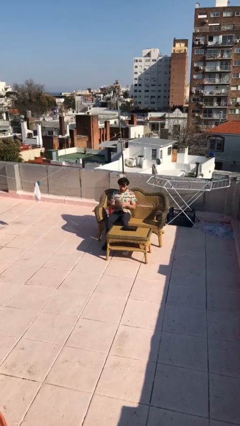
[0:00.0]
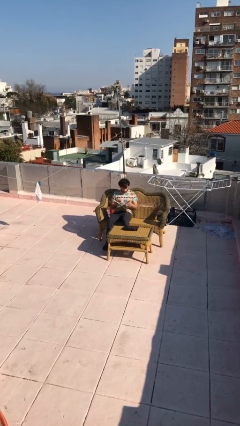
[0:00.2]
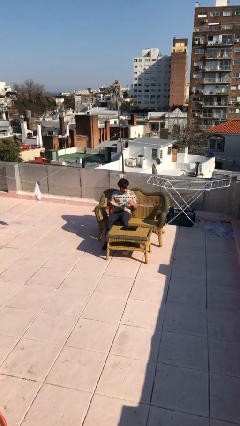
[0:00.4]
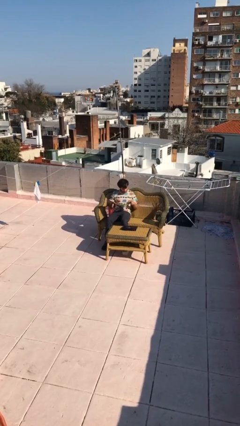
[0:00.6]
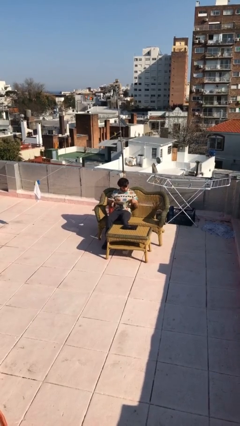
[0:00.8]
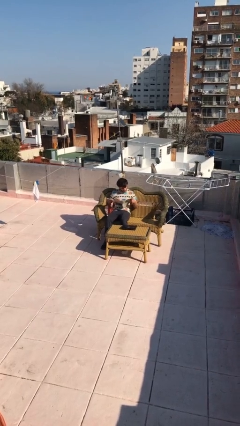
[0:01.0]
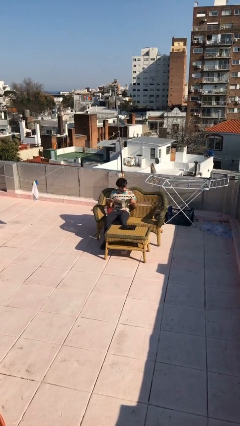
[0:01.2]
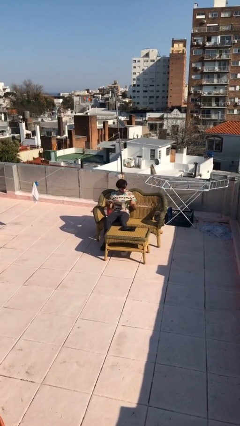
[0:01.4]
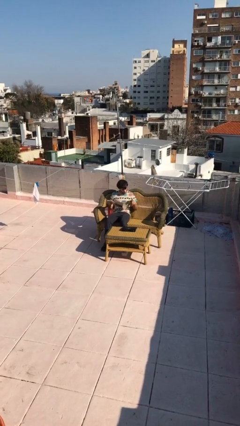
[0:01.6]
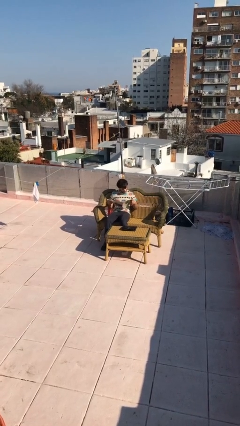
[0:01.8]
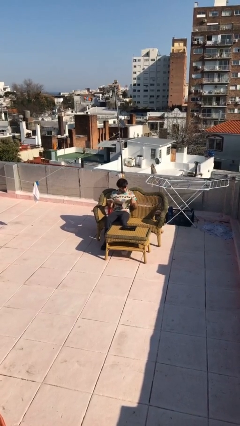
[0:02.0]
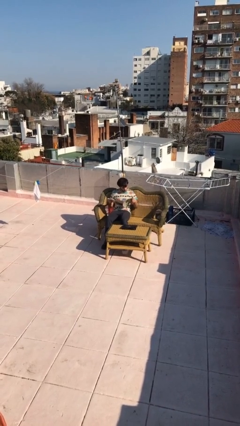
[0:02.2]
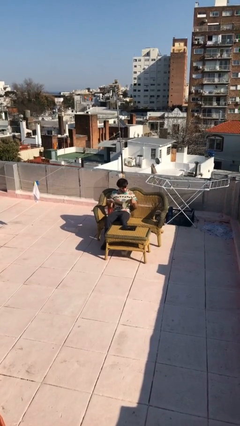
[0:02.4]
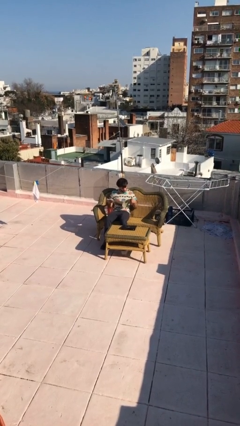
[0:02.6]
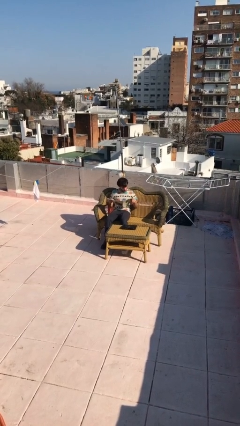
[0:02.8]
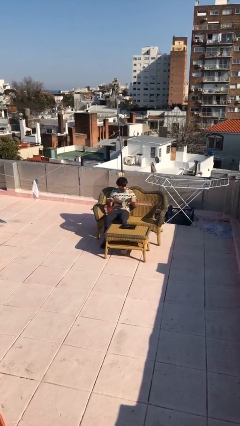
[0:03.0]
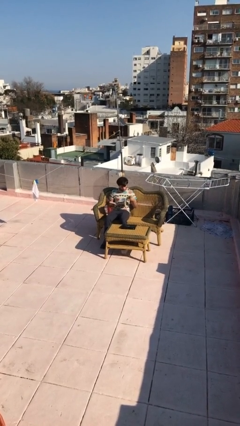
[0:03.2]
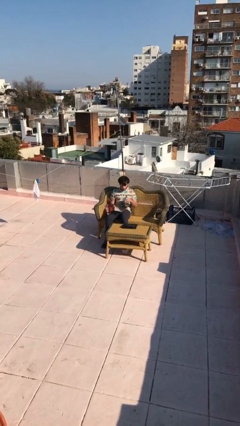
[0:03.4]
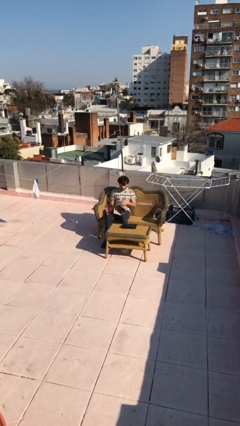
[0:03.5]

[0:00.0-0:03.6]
person reads newspaper

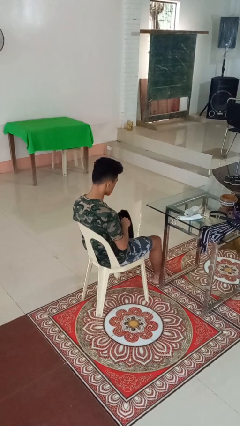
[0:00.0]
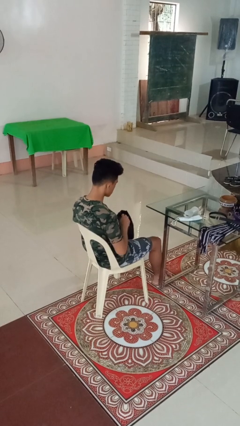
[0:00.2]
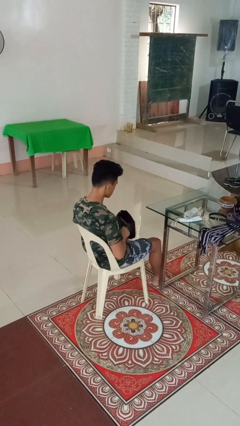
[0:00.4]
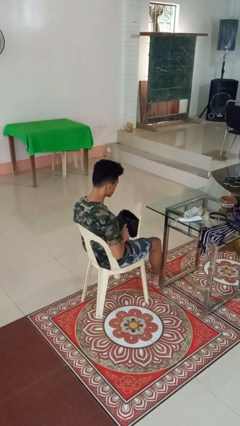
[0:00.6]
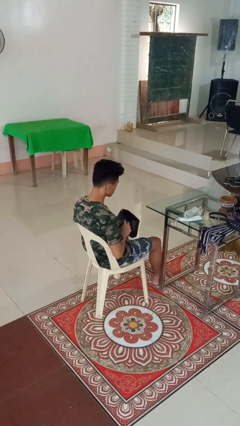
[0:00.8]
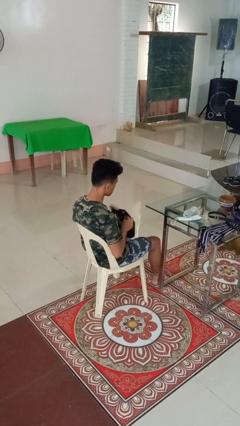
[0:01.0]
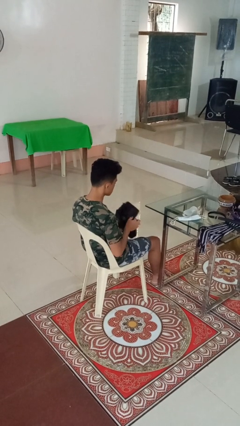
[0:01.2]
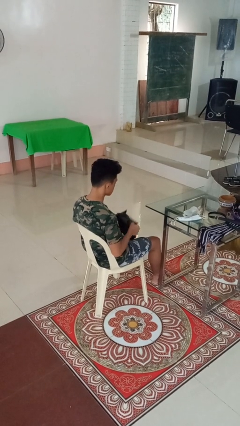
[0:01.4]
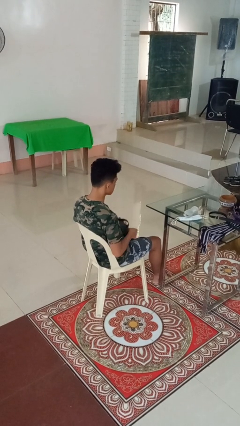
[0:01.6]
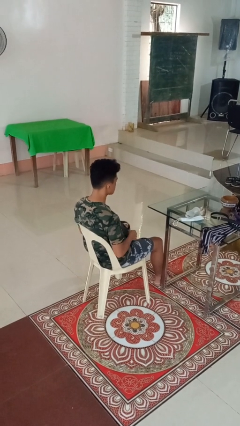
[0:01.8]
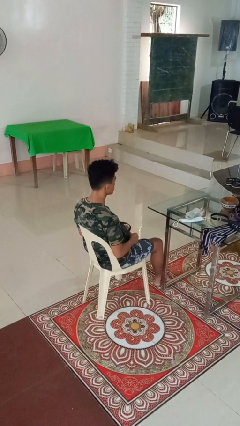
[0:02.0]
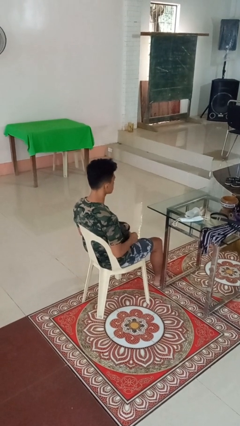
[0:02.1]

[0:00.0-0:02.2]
person puts object into purse

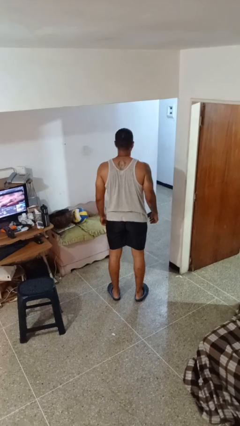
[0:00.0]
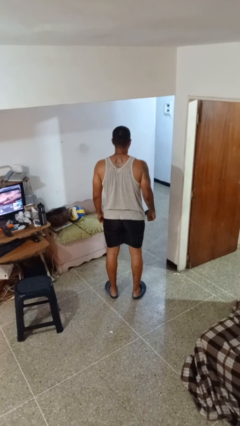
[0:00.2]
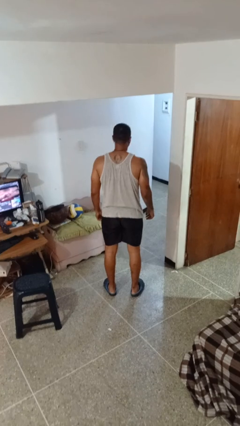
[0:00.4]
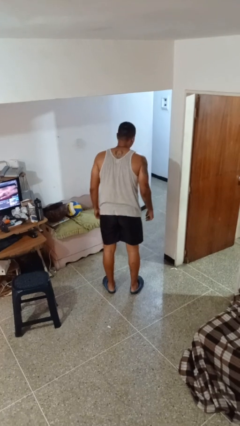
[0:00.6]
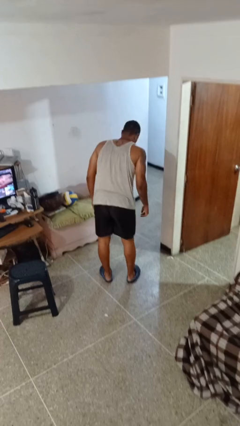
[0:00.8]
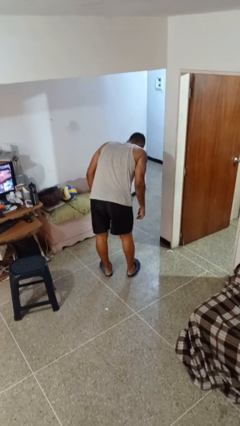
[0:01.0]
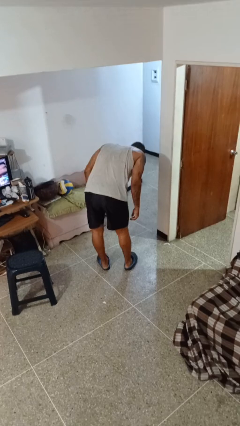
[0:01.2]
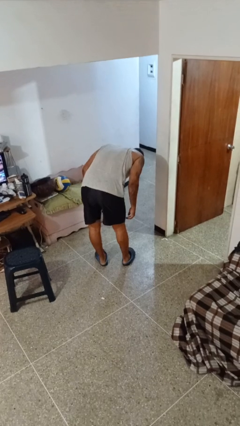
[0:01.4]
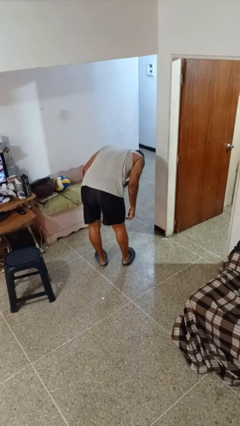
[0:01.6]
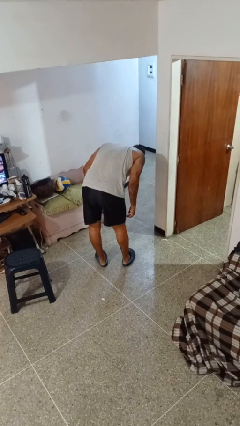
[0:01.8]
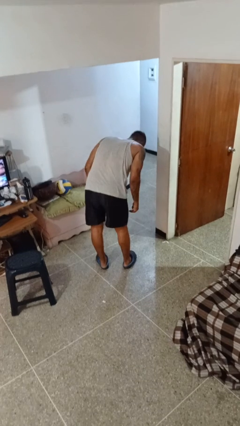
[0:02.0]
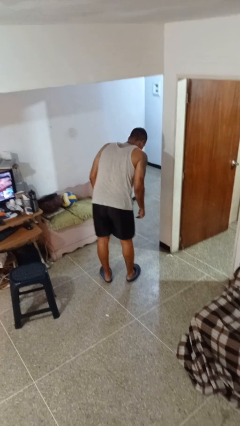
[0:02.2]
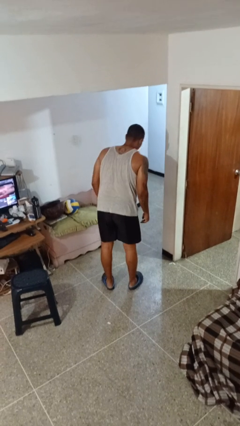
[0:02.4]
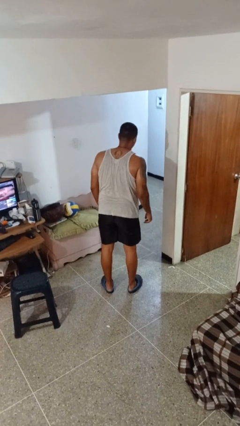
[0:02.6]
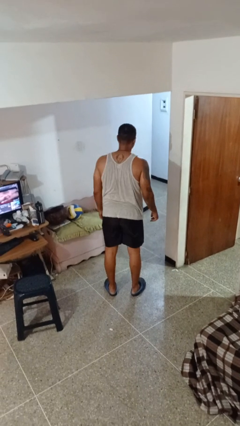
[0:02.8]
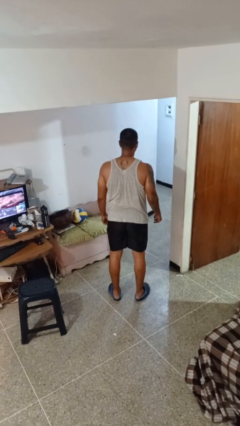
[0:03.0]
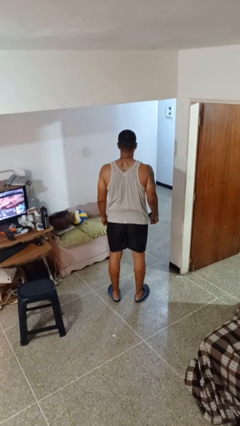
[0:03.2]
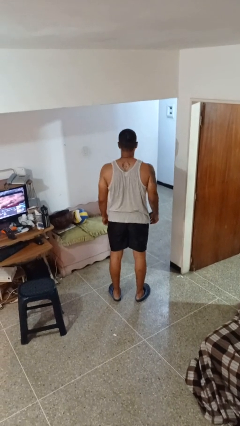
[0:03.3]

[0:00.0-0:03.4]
person bows

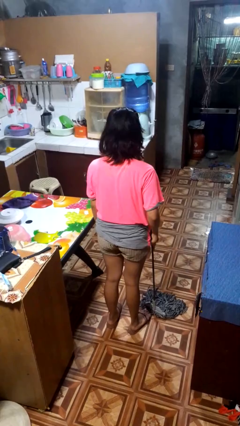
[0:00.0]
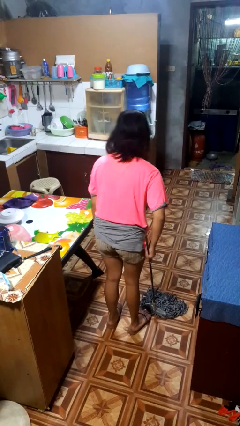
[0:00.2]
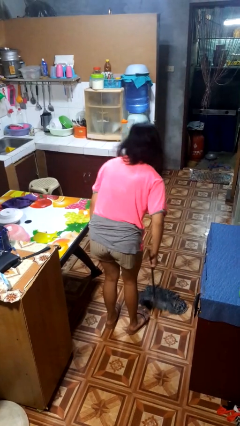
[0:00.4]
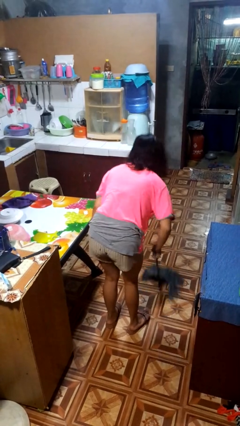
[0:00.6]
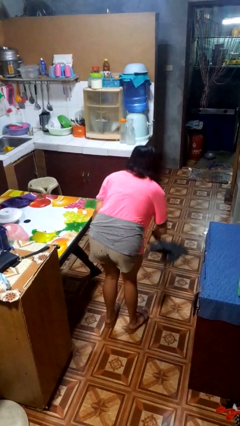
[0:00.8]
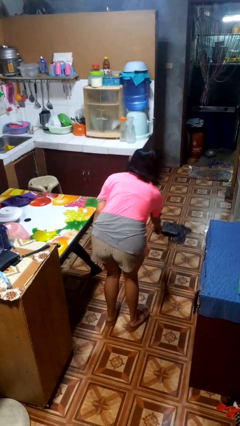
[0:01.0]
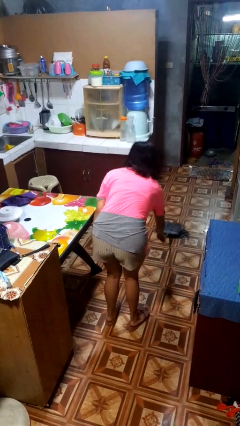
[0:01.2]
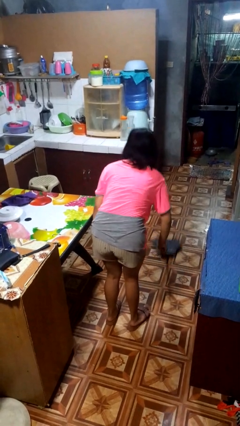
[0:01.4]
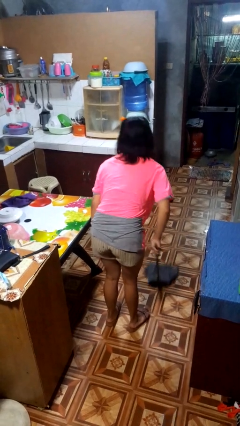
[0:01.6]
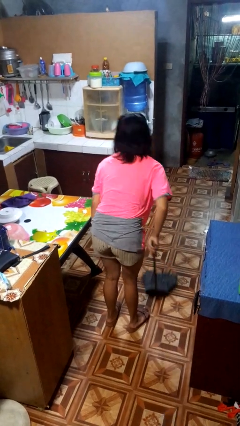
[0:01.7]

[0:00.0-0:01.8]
person mops

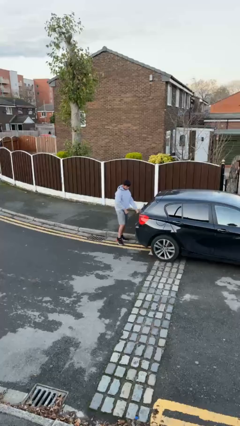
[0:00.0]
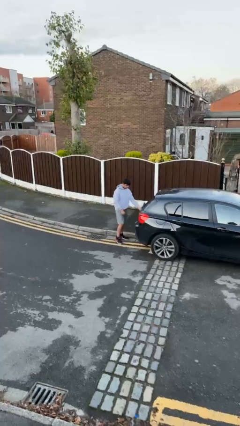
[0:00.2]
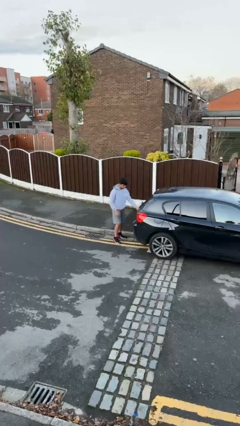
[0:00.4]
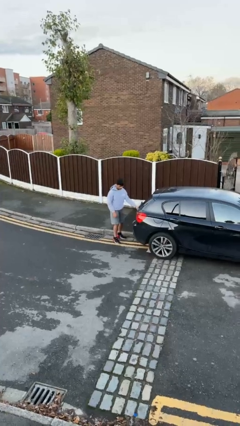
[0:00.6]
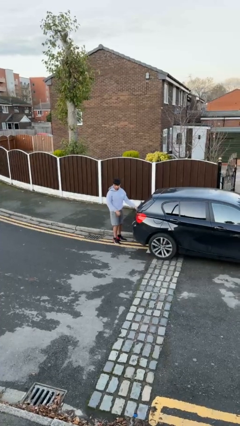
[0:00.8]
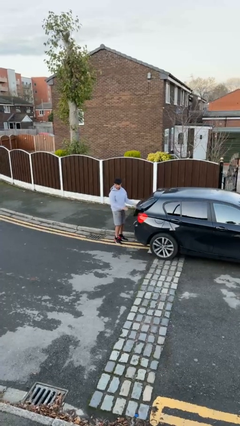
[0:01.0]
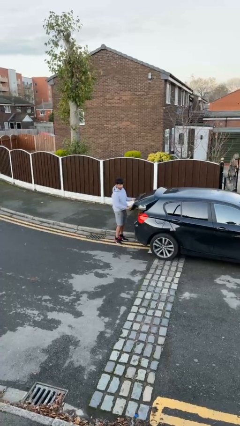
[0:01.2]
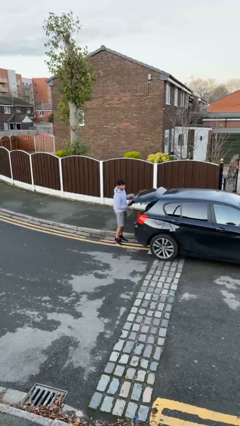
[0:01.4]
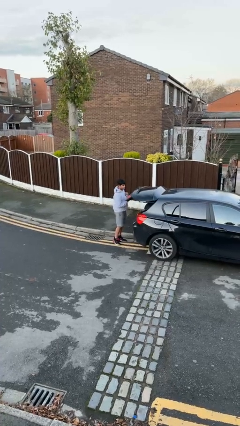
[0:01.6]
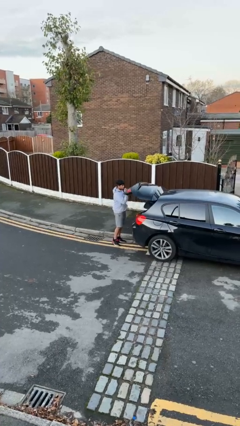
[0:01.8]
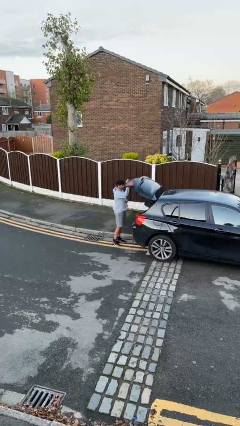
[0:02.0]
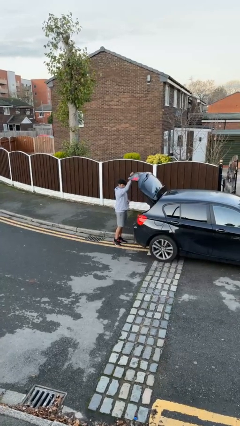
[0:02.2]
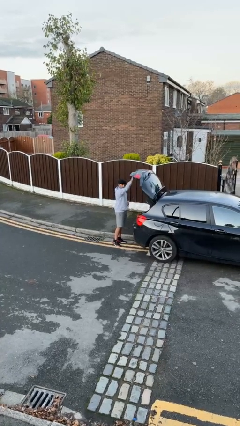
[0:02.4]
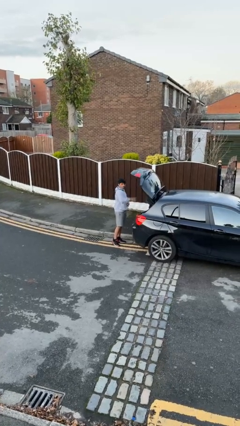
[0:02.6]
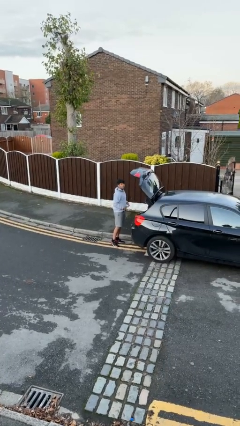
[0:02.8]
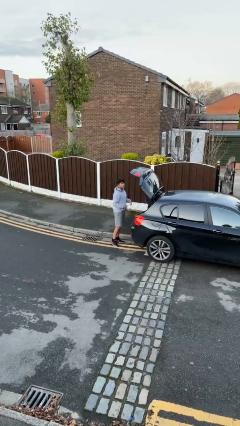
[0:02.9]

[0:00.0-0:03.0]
person opens car trunk

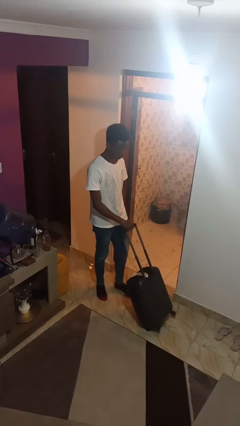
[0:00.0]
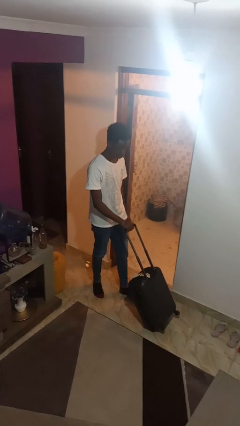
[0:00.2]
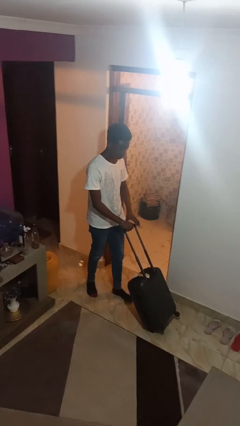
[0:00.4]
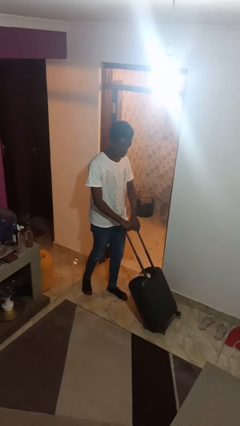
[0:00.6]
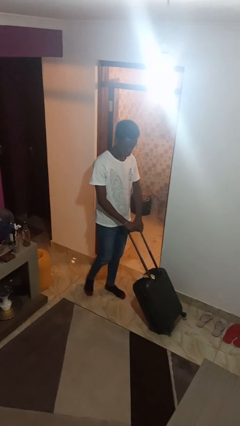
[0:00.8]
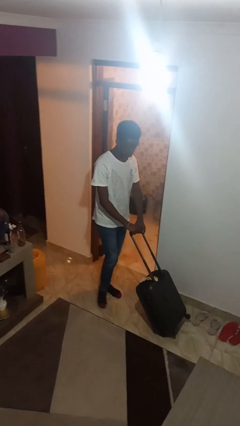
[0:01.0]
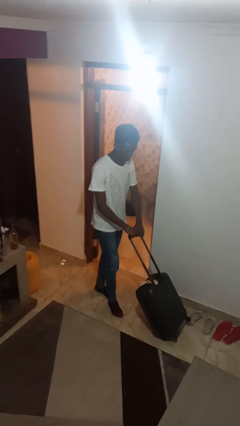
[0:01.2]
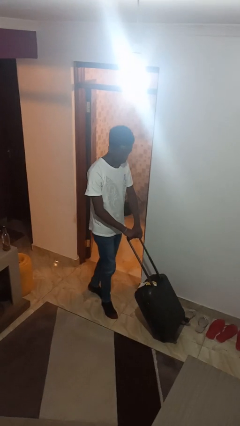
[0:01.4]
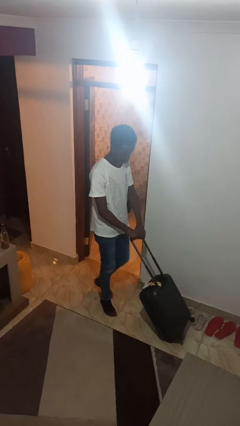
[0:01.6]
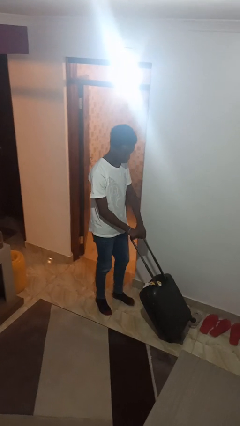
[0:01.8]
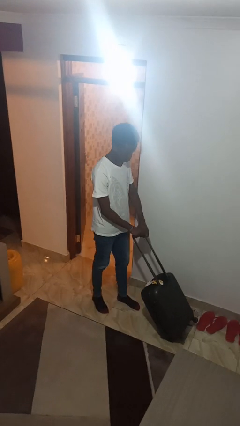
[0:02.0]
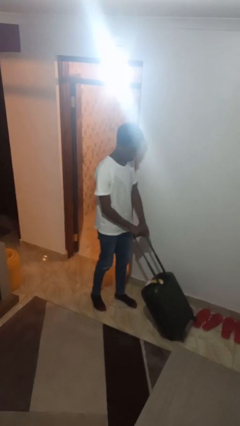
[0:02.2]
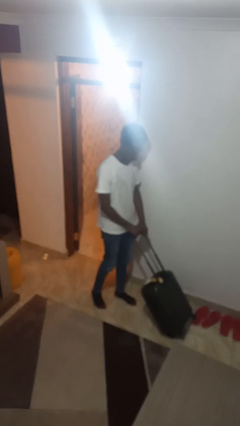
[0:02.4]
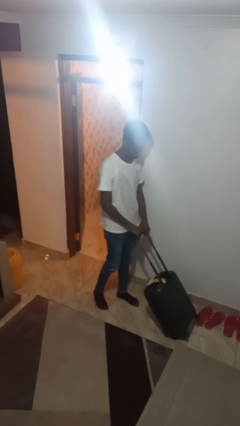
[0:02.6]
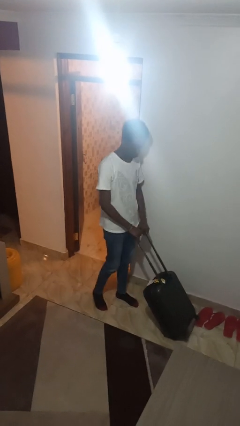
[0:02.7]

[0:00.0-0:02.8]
person pushes wheeled cart

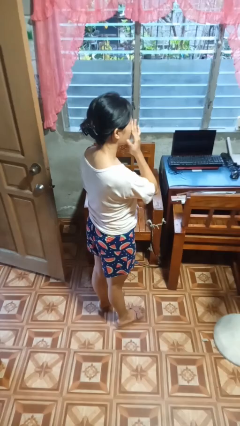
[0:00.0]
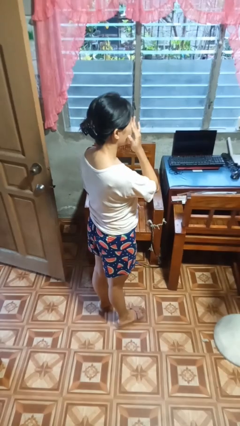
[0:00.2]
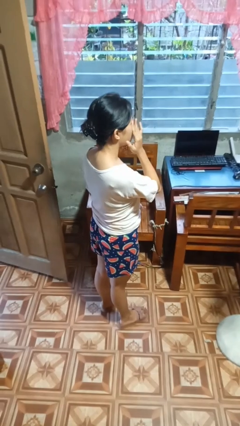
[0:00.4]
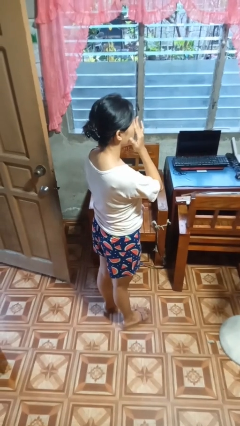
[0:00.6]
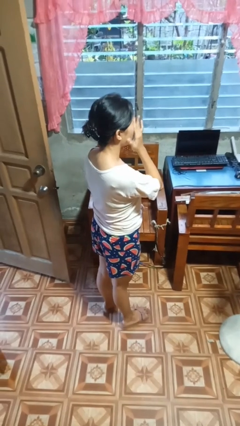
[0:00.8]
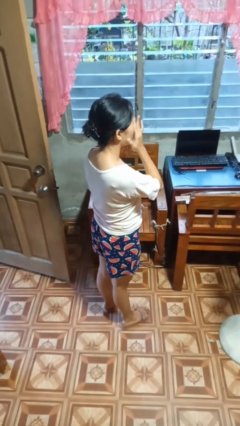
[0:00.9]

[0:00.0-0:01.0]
person rubs eyes
